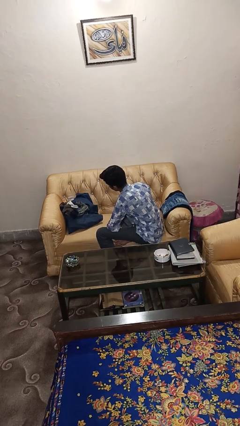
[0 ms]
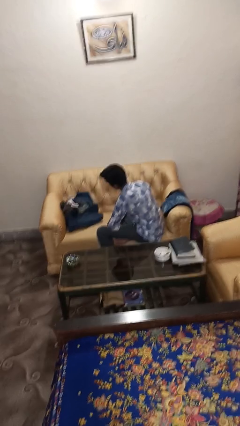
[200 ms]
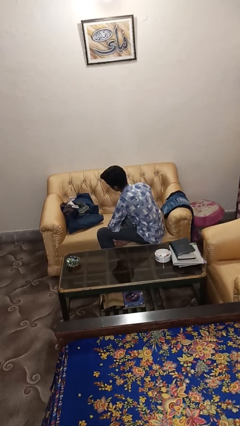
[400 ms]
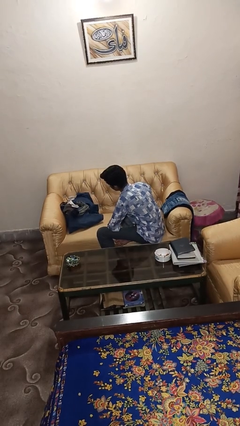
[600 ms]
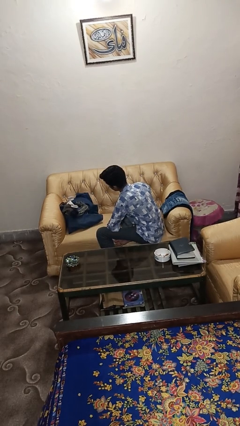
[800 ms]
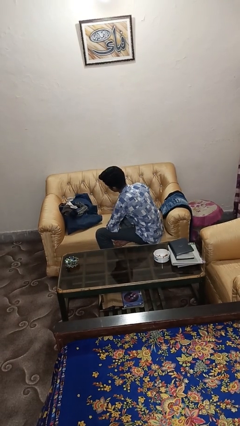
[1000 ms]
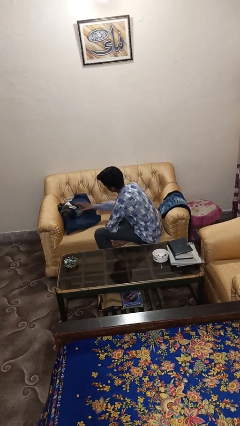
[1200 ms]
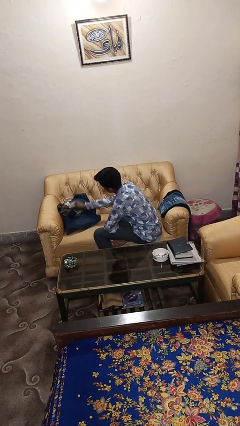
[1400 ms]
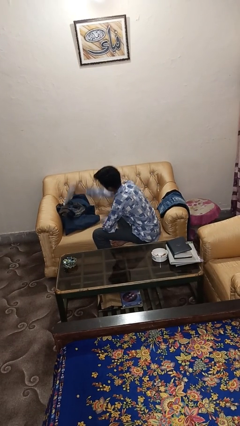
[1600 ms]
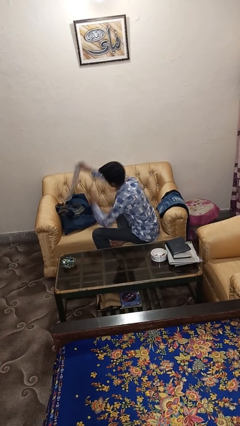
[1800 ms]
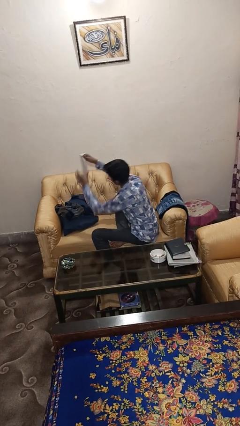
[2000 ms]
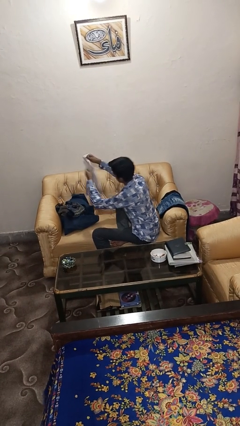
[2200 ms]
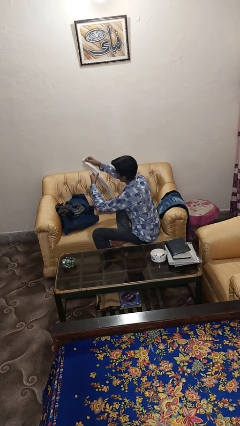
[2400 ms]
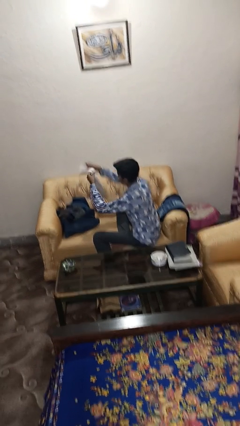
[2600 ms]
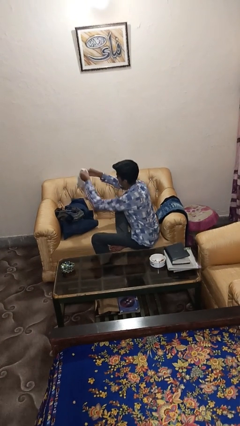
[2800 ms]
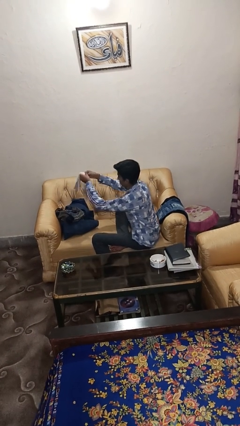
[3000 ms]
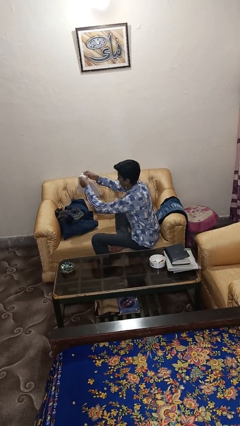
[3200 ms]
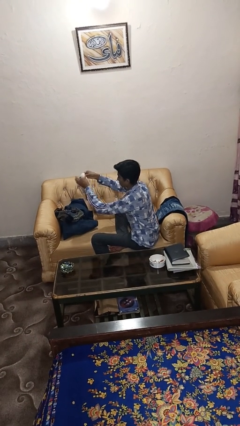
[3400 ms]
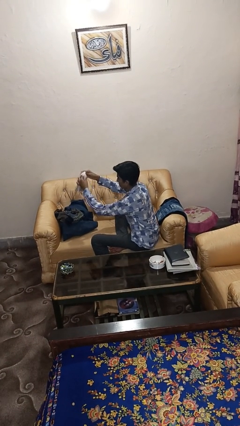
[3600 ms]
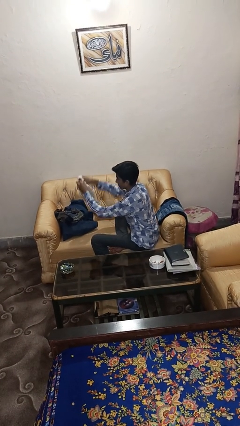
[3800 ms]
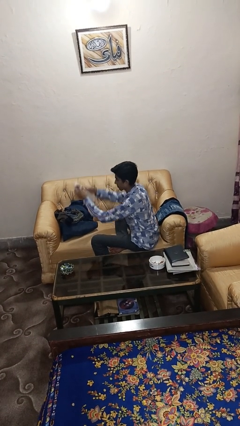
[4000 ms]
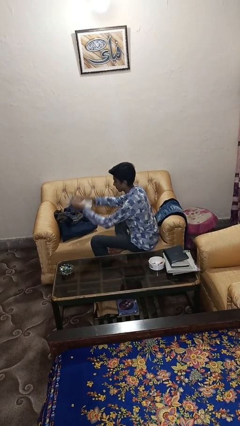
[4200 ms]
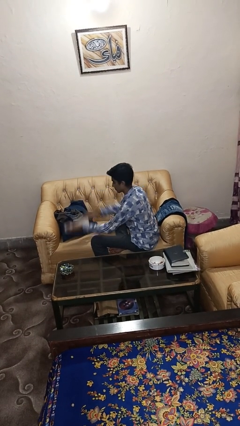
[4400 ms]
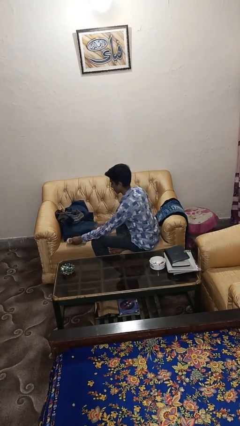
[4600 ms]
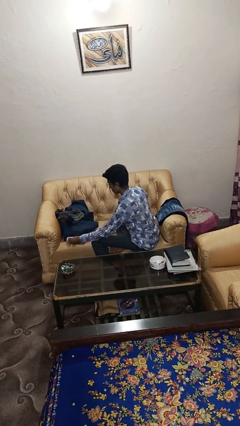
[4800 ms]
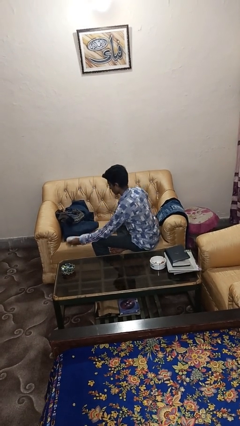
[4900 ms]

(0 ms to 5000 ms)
person folds socks

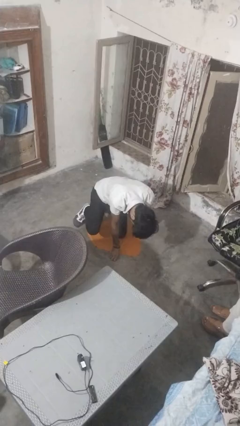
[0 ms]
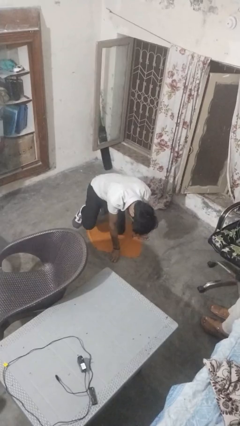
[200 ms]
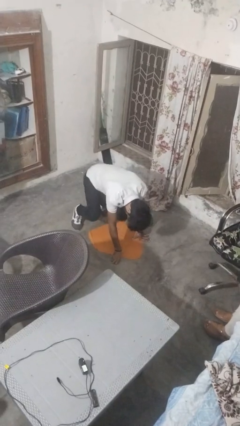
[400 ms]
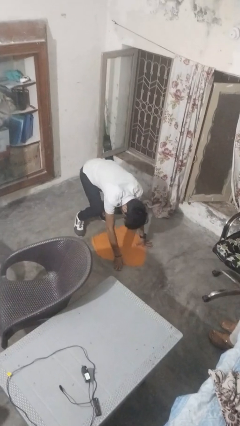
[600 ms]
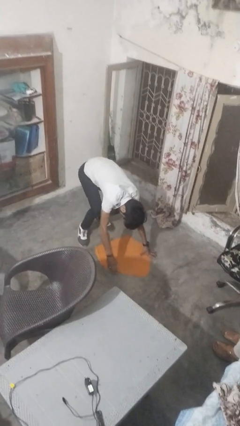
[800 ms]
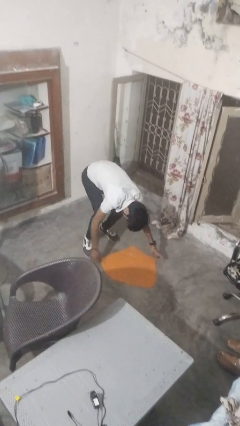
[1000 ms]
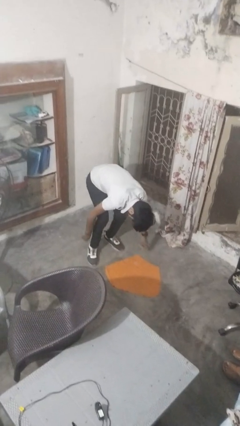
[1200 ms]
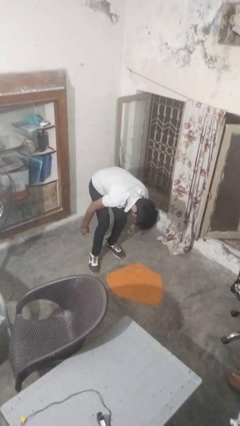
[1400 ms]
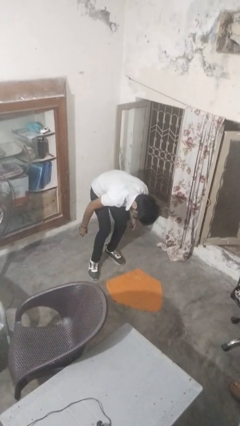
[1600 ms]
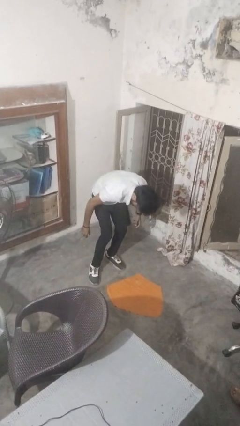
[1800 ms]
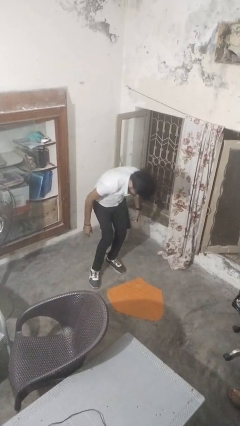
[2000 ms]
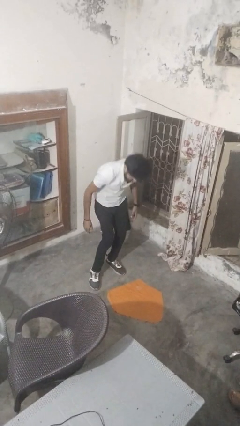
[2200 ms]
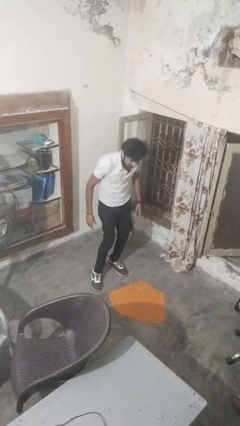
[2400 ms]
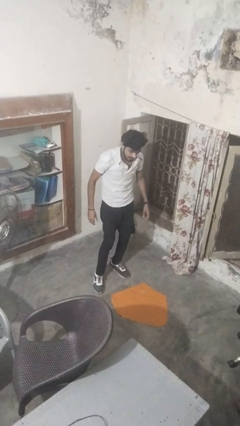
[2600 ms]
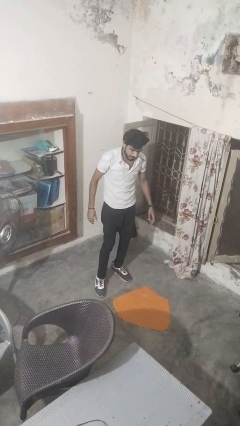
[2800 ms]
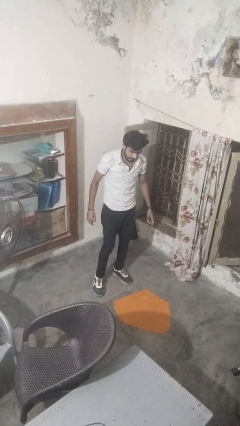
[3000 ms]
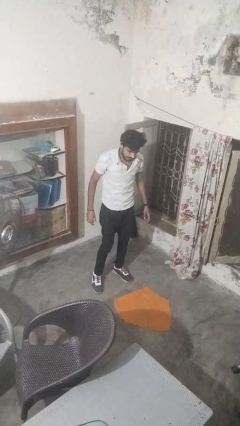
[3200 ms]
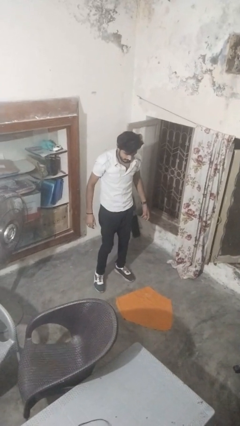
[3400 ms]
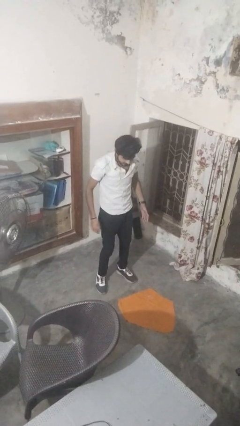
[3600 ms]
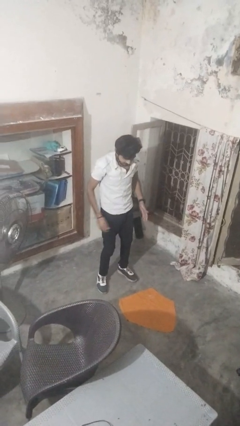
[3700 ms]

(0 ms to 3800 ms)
person stands up from floor

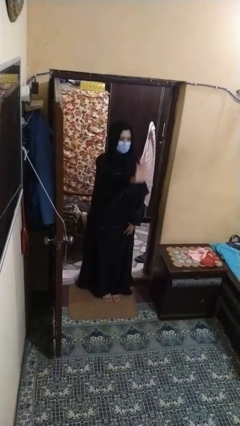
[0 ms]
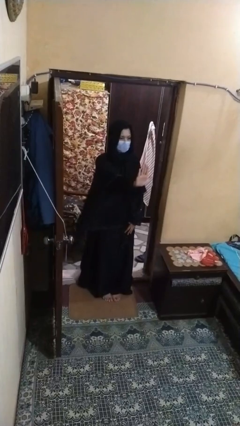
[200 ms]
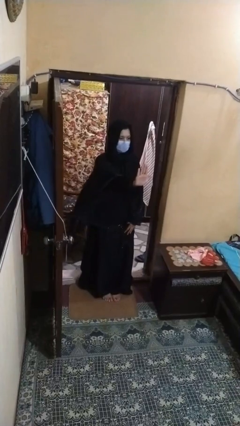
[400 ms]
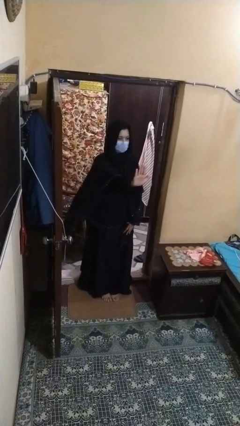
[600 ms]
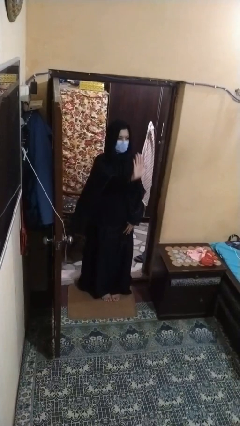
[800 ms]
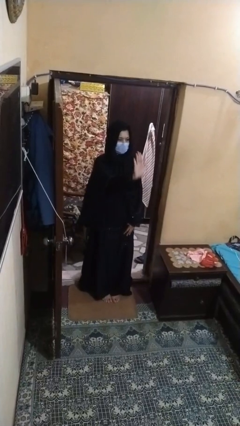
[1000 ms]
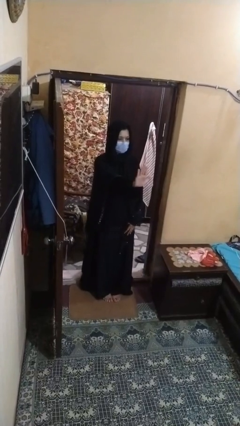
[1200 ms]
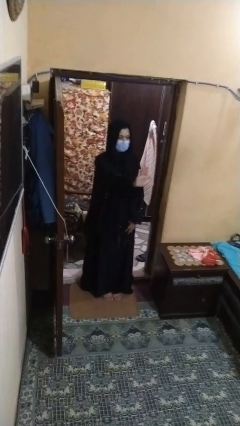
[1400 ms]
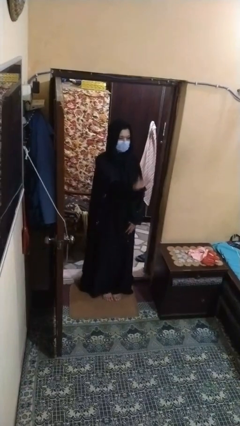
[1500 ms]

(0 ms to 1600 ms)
person gestures stop

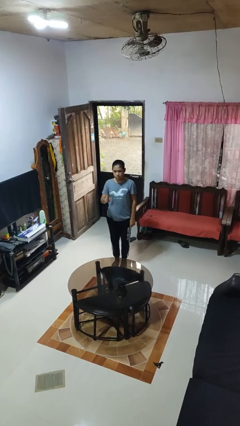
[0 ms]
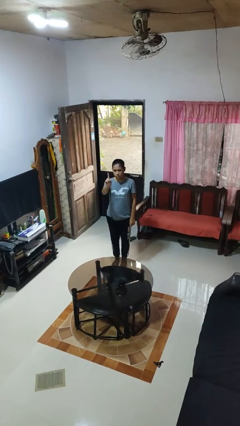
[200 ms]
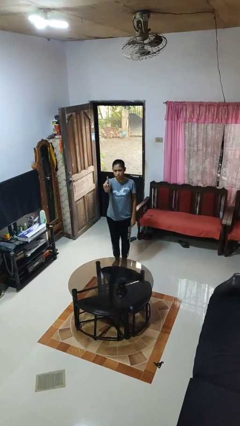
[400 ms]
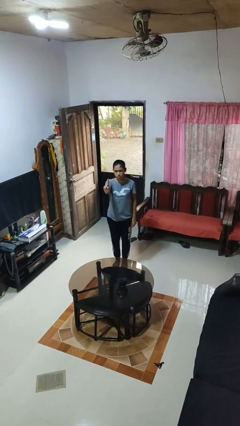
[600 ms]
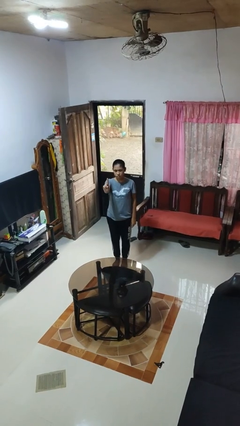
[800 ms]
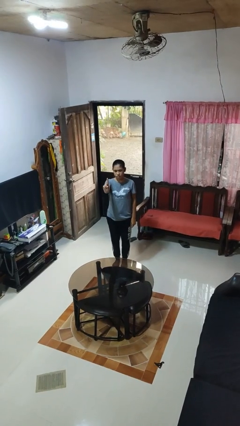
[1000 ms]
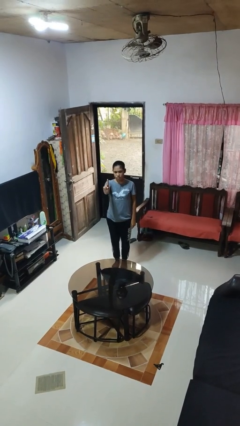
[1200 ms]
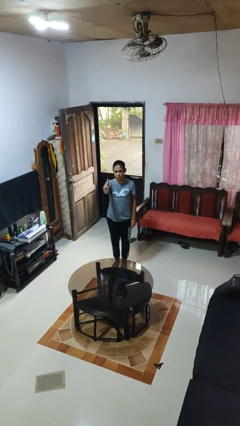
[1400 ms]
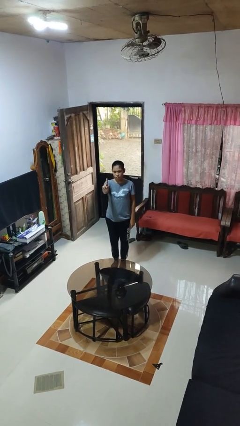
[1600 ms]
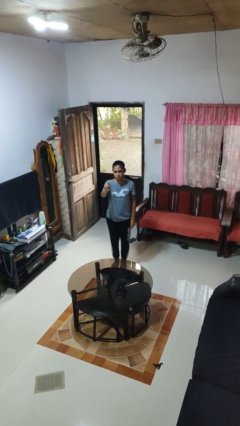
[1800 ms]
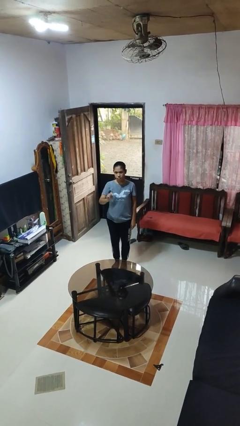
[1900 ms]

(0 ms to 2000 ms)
person gestures number one

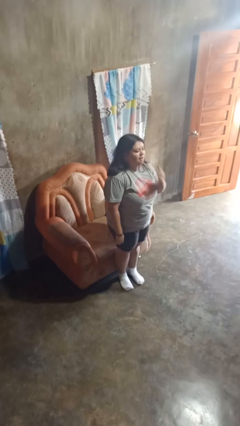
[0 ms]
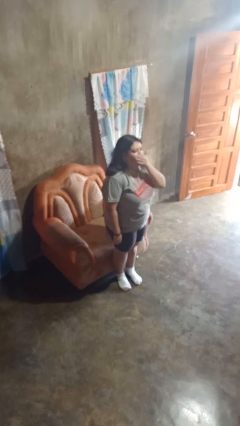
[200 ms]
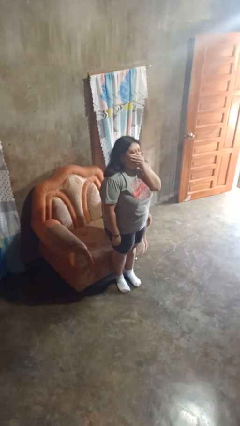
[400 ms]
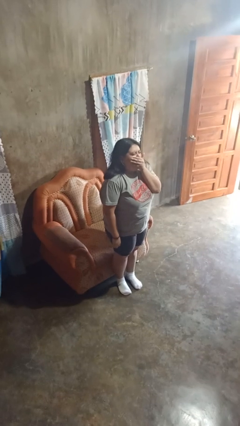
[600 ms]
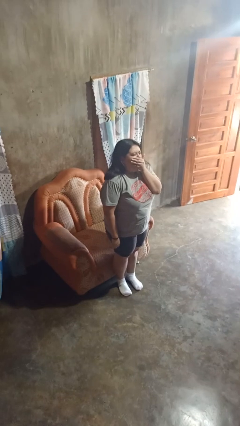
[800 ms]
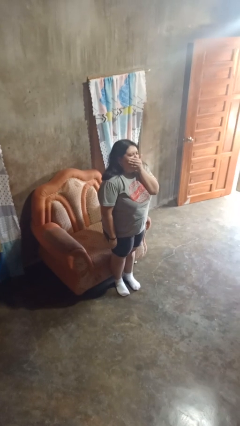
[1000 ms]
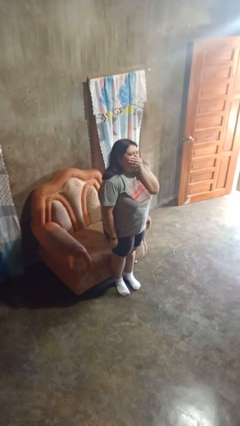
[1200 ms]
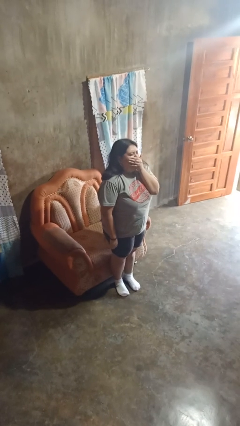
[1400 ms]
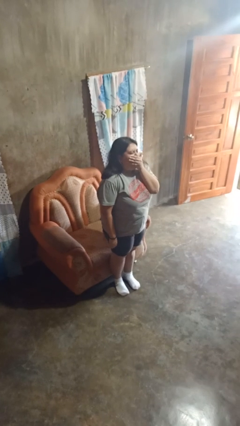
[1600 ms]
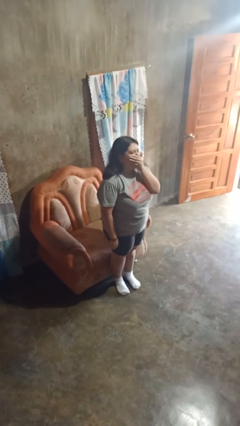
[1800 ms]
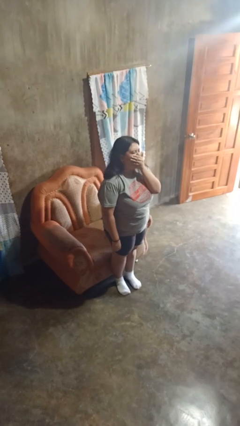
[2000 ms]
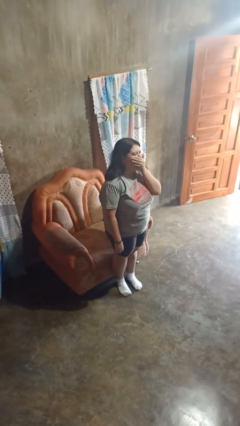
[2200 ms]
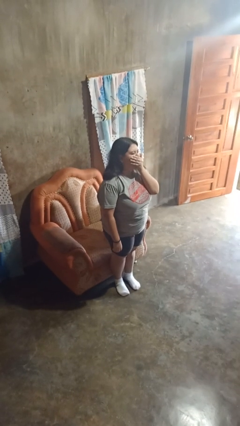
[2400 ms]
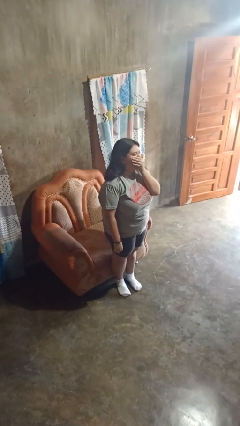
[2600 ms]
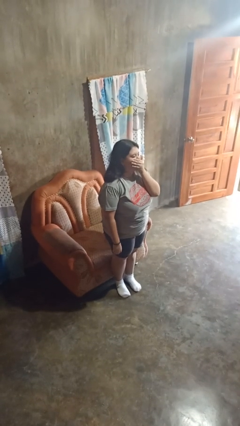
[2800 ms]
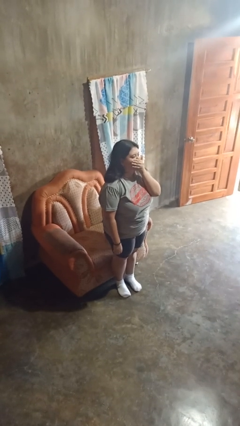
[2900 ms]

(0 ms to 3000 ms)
person yawns

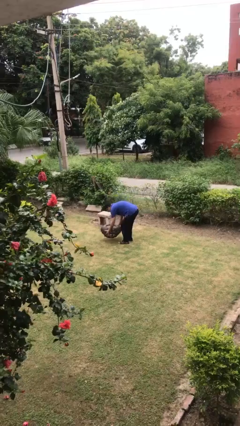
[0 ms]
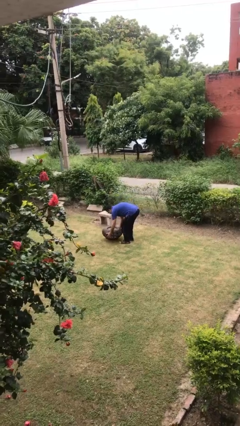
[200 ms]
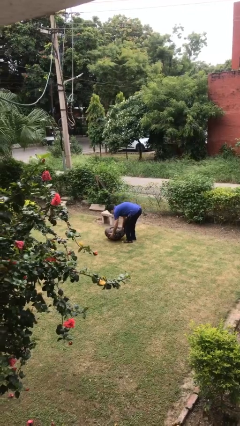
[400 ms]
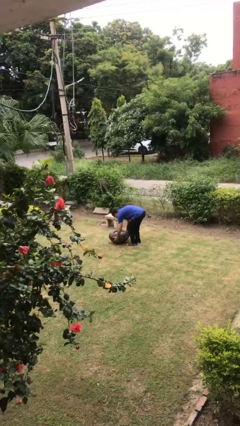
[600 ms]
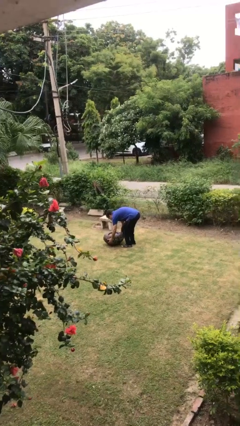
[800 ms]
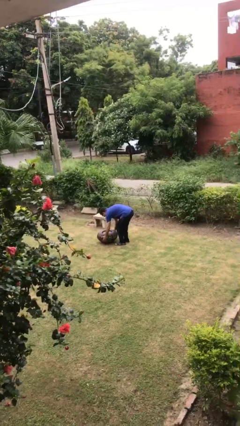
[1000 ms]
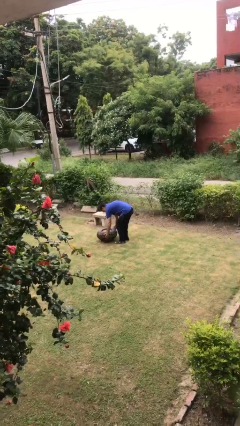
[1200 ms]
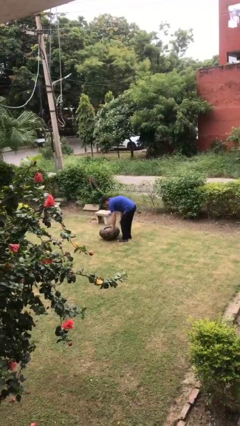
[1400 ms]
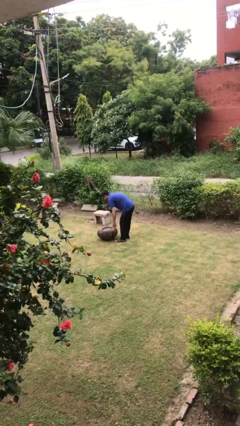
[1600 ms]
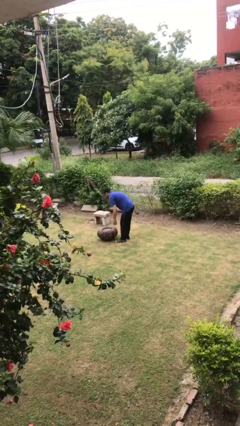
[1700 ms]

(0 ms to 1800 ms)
person puts down object on floor
